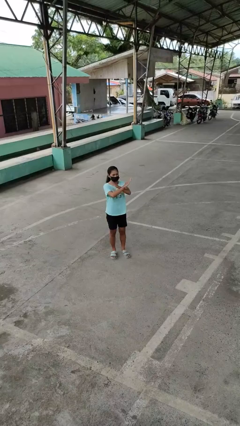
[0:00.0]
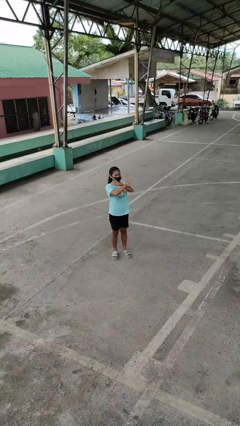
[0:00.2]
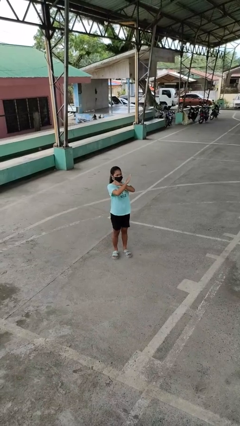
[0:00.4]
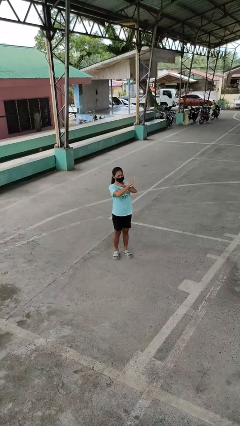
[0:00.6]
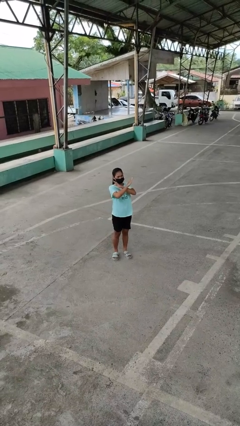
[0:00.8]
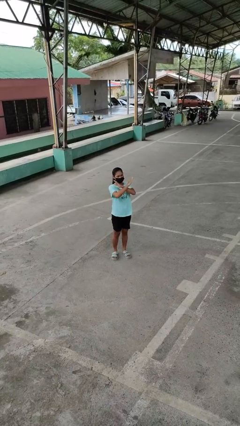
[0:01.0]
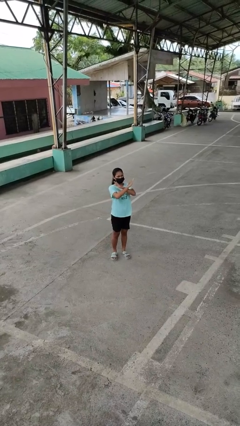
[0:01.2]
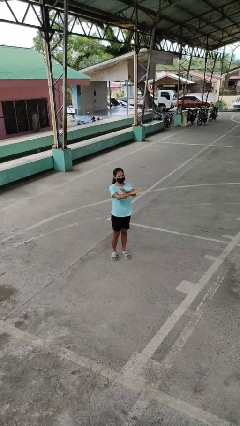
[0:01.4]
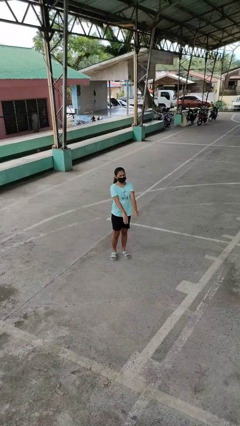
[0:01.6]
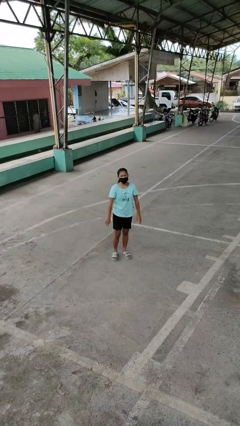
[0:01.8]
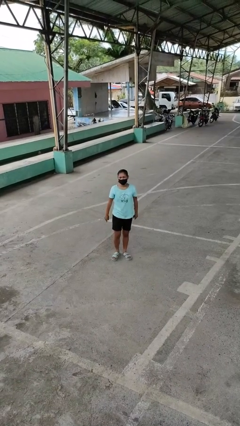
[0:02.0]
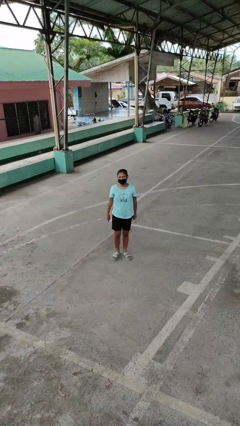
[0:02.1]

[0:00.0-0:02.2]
person gestures arms x

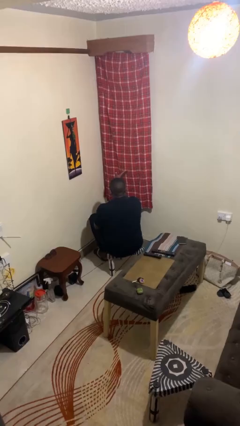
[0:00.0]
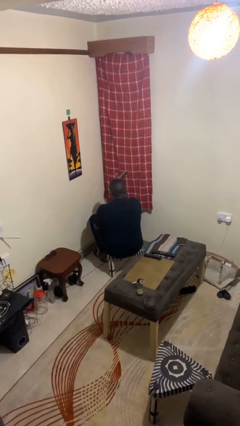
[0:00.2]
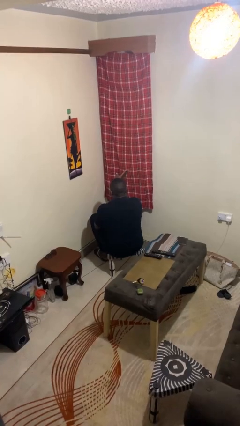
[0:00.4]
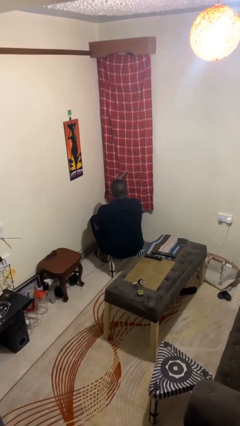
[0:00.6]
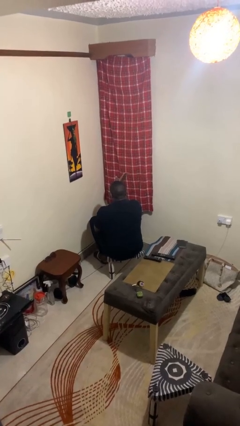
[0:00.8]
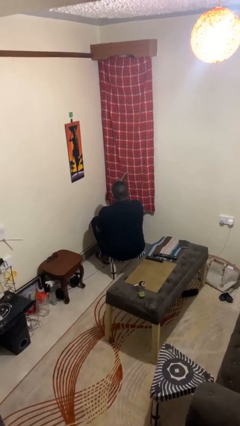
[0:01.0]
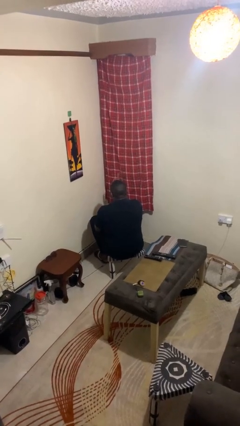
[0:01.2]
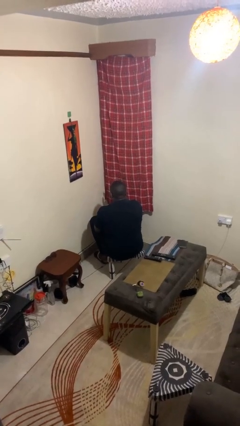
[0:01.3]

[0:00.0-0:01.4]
person gestures swipe right

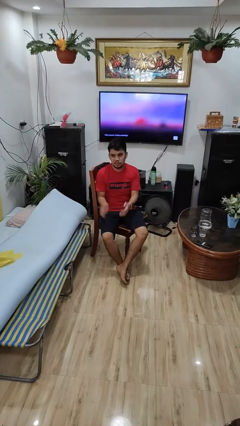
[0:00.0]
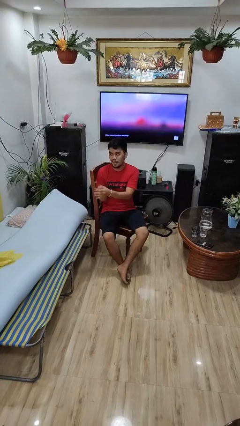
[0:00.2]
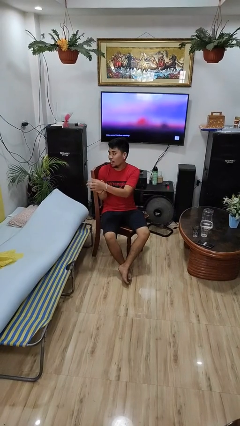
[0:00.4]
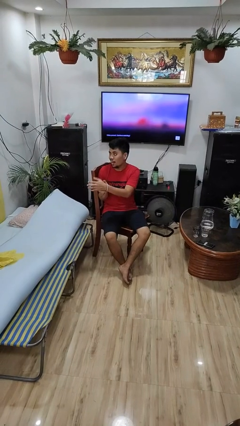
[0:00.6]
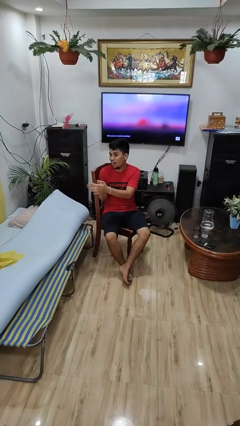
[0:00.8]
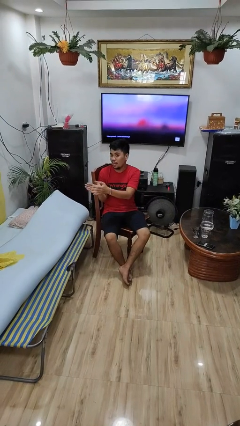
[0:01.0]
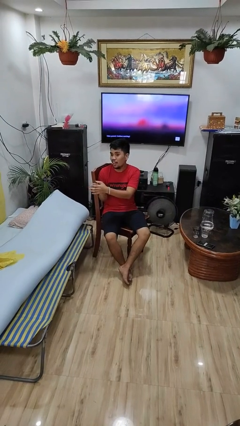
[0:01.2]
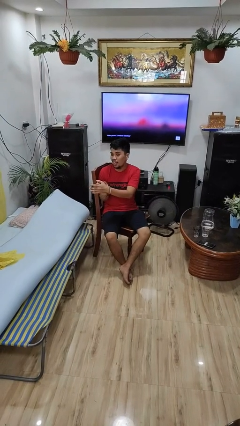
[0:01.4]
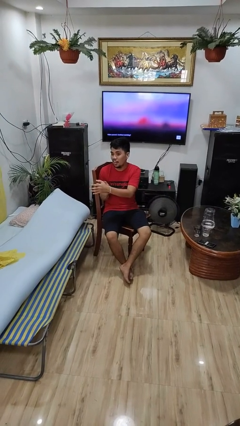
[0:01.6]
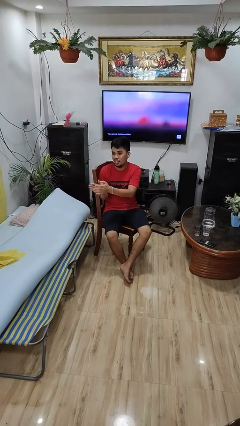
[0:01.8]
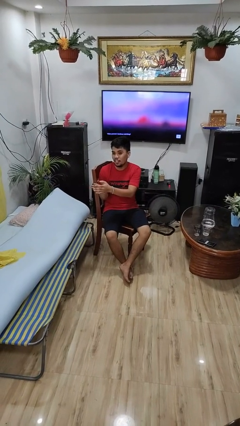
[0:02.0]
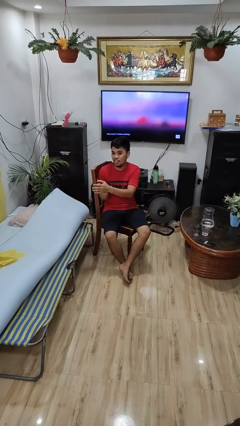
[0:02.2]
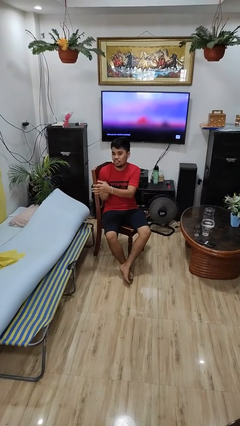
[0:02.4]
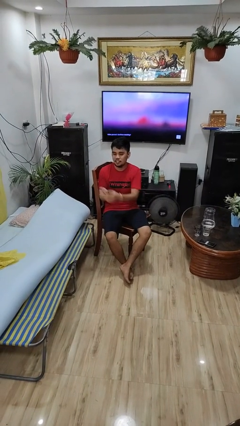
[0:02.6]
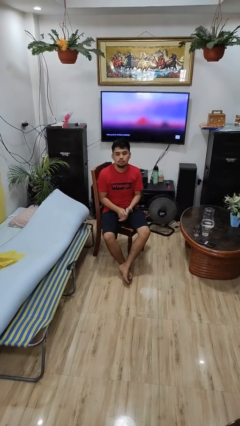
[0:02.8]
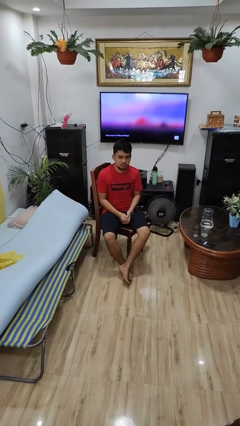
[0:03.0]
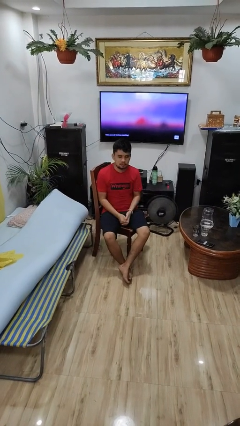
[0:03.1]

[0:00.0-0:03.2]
person claps hands

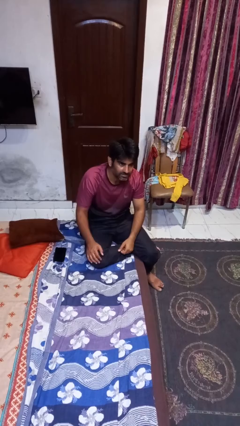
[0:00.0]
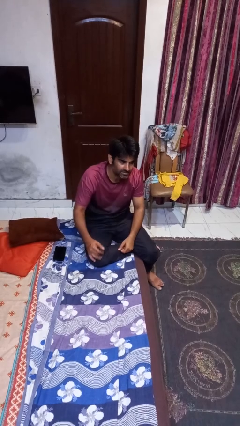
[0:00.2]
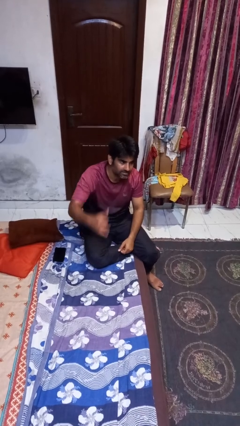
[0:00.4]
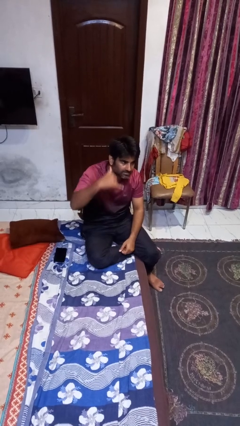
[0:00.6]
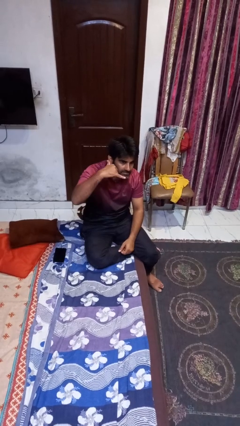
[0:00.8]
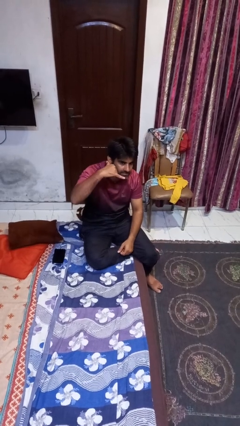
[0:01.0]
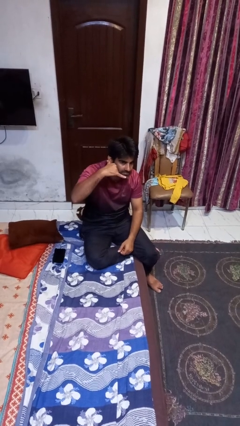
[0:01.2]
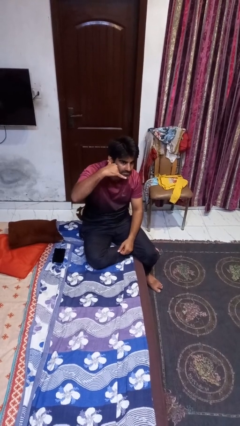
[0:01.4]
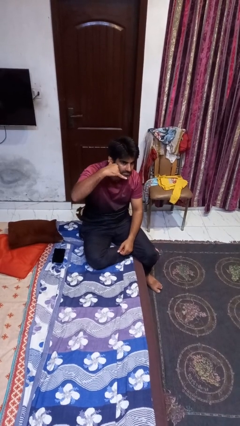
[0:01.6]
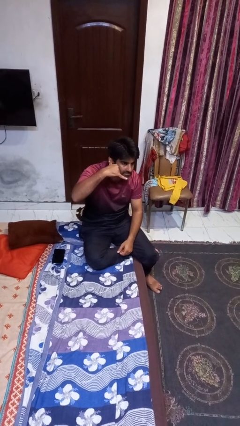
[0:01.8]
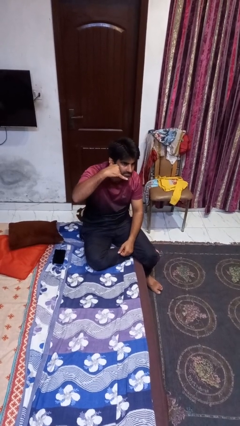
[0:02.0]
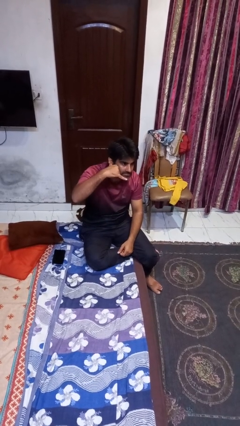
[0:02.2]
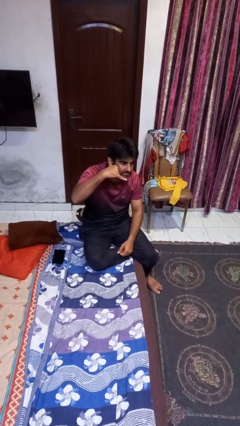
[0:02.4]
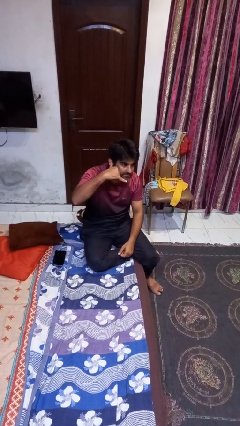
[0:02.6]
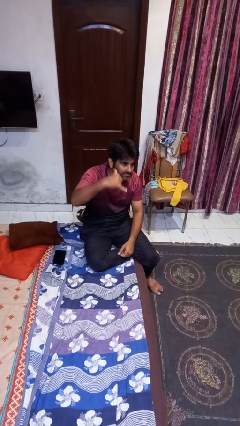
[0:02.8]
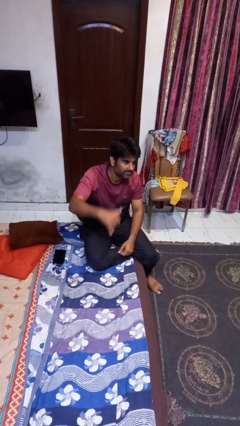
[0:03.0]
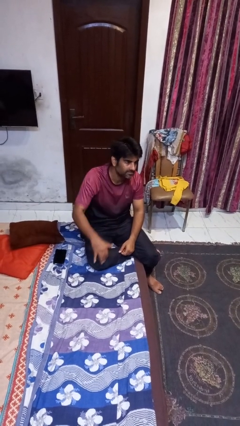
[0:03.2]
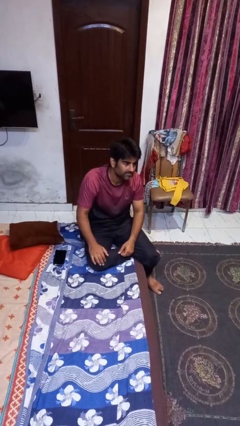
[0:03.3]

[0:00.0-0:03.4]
person gestures call me

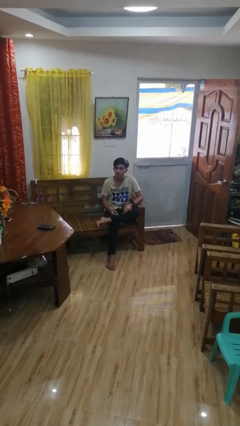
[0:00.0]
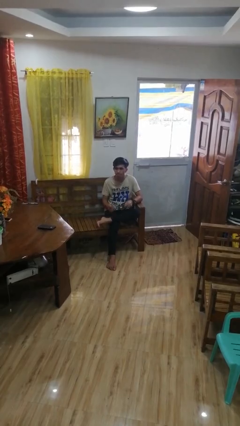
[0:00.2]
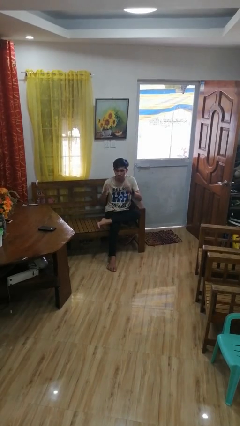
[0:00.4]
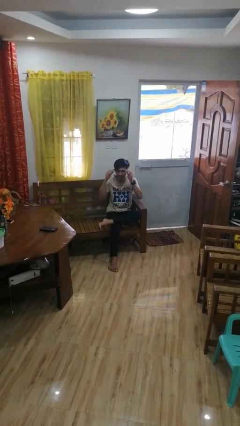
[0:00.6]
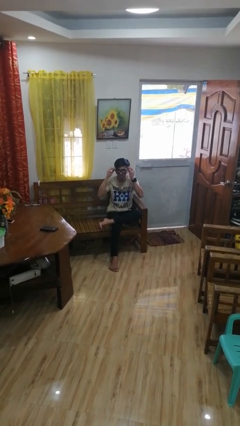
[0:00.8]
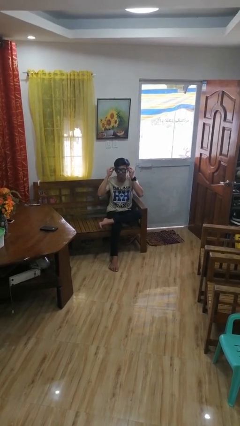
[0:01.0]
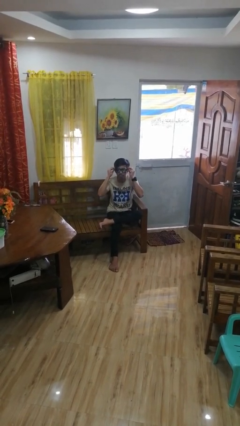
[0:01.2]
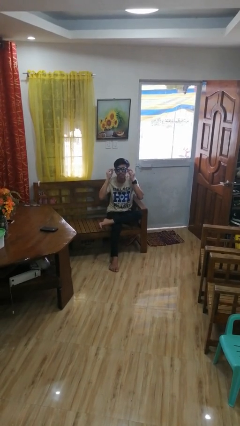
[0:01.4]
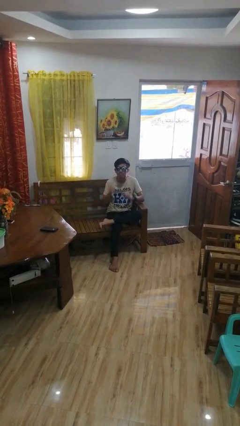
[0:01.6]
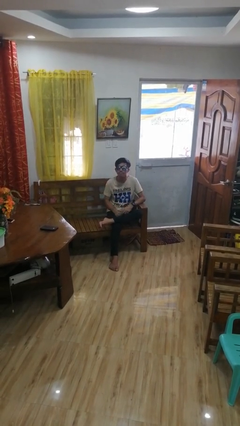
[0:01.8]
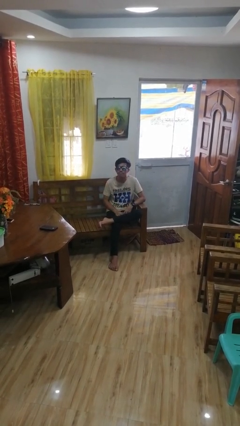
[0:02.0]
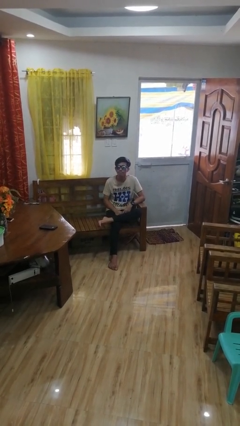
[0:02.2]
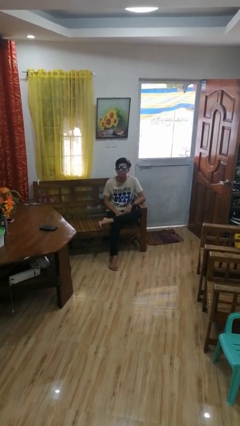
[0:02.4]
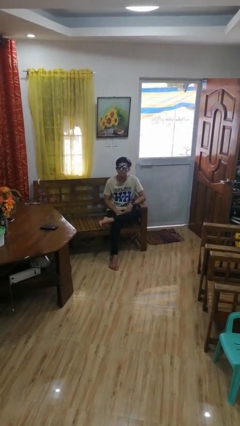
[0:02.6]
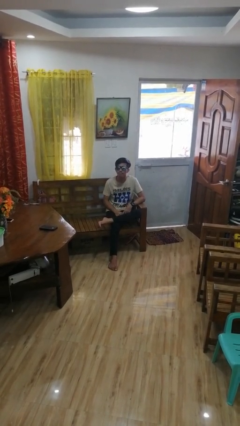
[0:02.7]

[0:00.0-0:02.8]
person puts on sunglasses

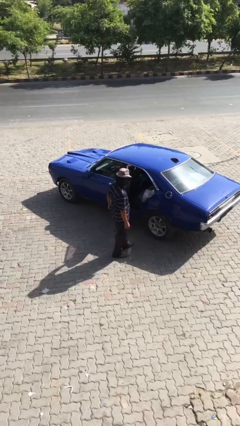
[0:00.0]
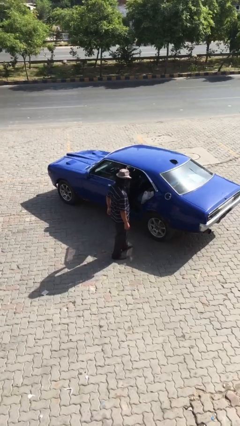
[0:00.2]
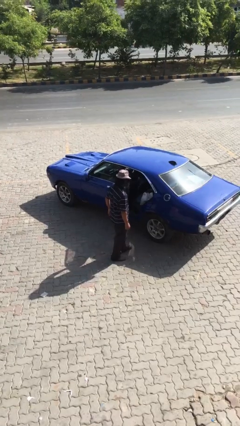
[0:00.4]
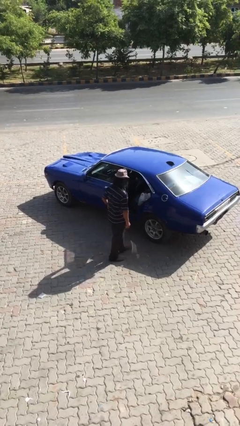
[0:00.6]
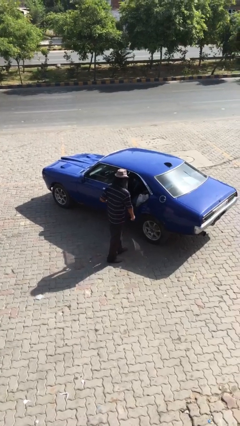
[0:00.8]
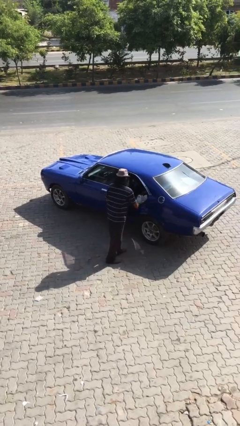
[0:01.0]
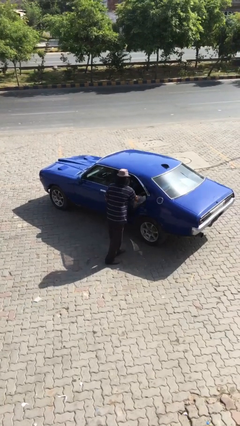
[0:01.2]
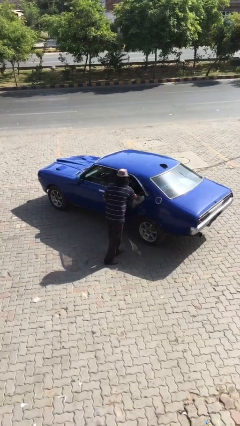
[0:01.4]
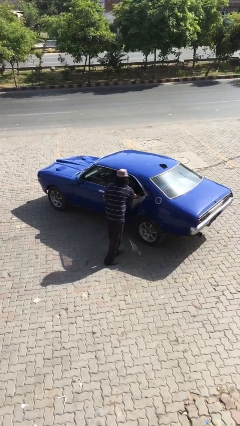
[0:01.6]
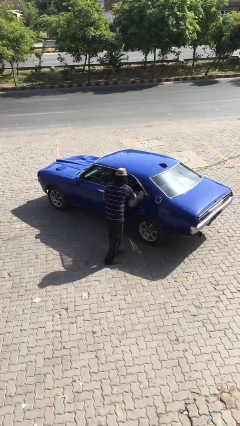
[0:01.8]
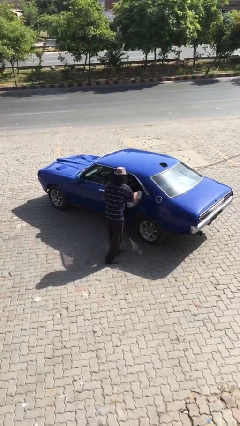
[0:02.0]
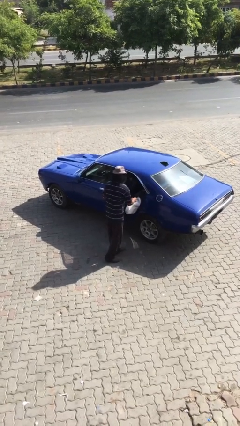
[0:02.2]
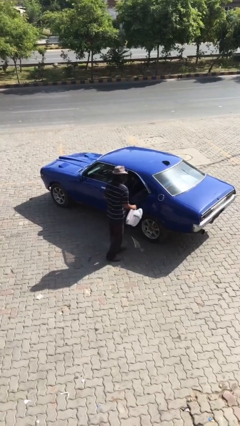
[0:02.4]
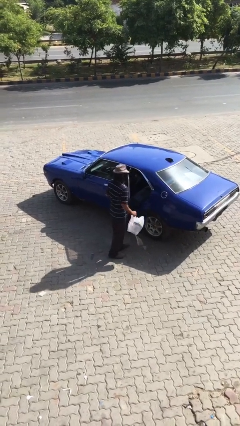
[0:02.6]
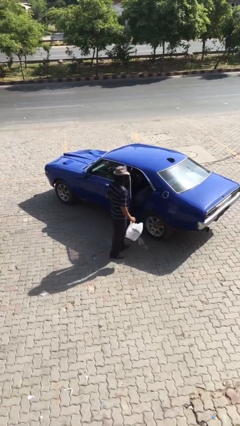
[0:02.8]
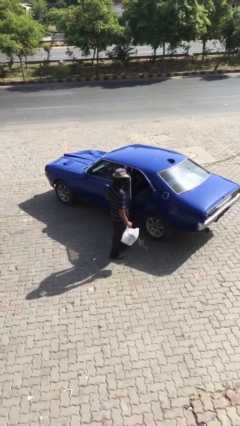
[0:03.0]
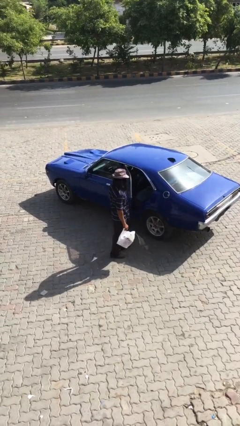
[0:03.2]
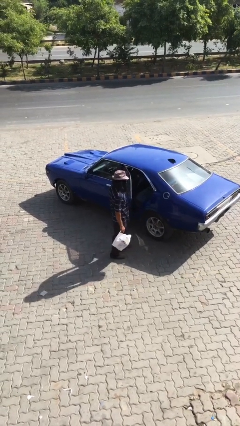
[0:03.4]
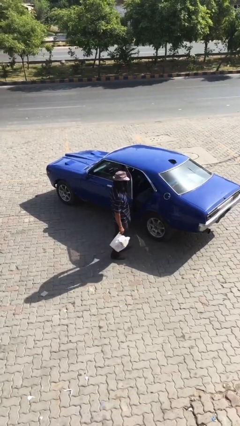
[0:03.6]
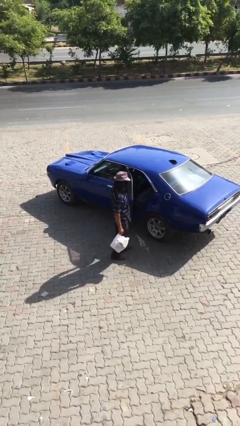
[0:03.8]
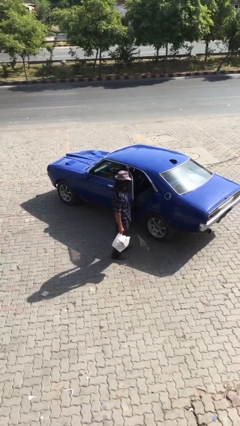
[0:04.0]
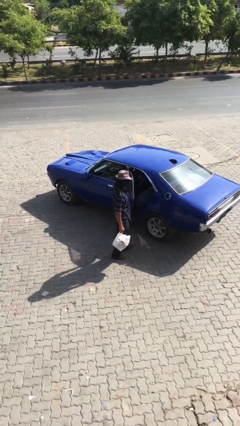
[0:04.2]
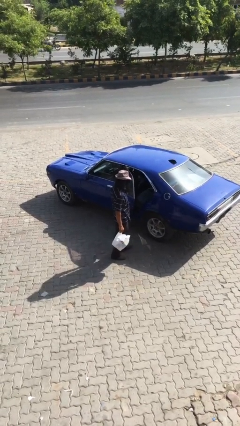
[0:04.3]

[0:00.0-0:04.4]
person unloads car
